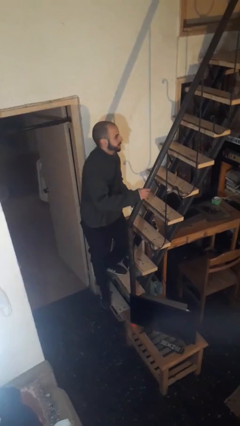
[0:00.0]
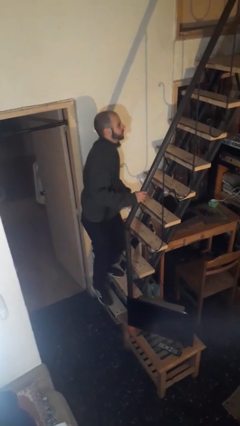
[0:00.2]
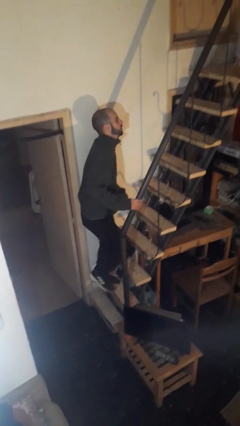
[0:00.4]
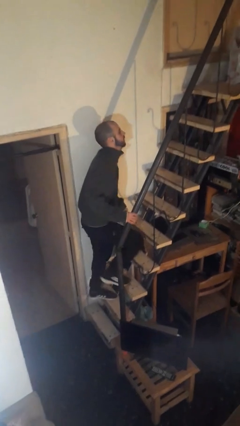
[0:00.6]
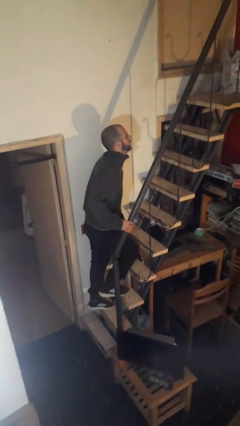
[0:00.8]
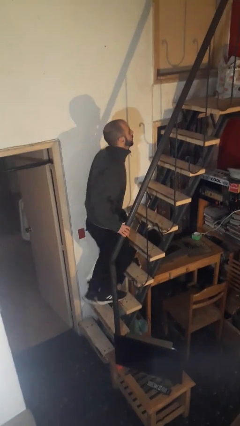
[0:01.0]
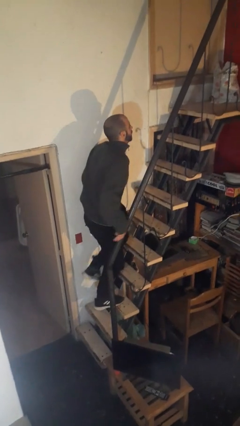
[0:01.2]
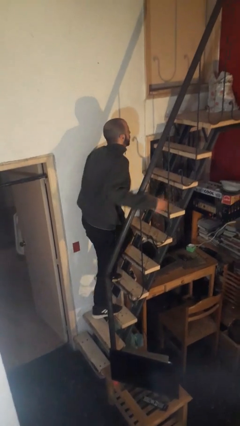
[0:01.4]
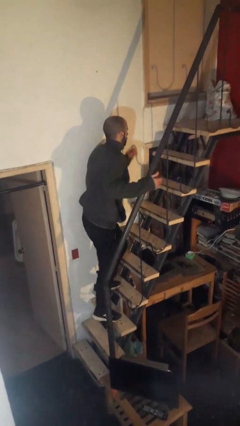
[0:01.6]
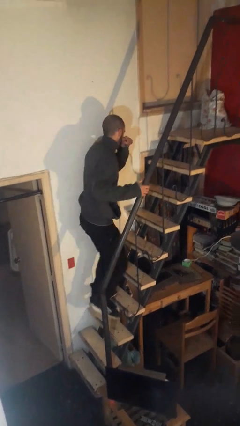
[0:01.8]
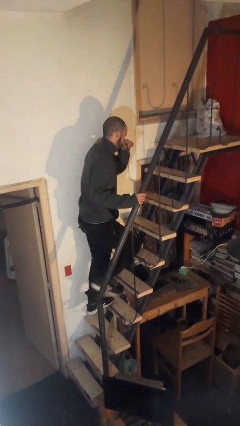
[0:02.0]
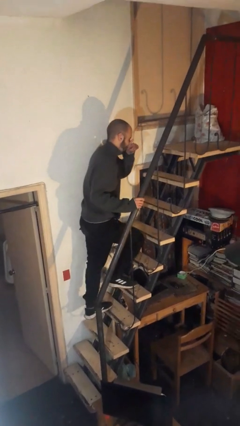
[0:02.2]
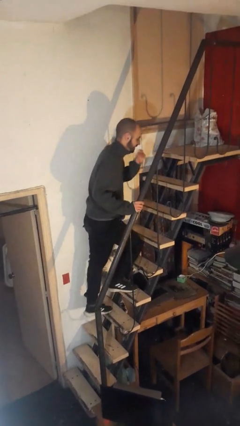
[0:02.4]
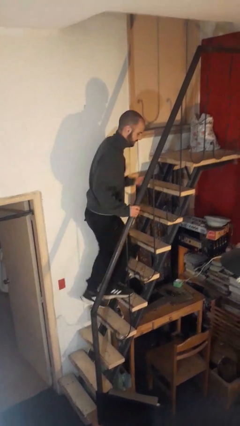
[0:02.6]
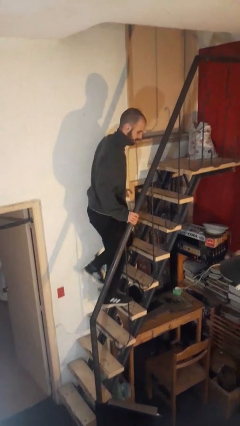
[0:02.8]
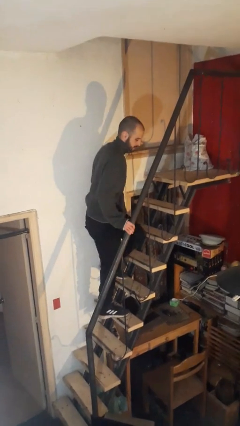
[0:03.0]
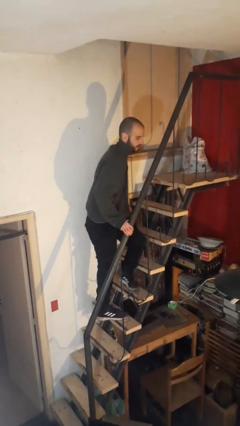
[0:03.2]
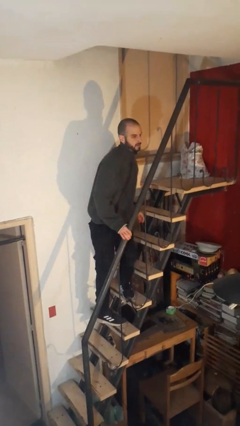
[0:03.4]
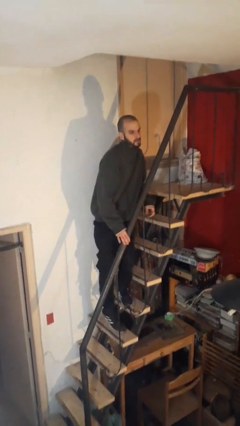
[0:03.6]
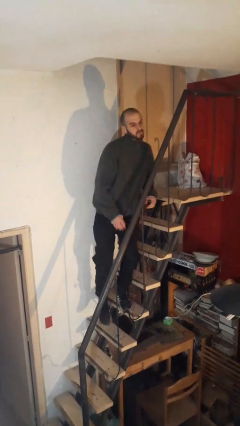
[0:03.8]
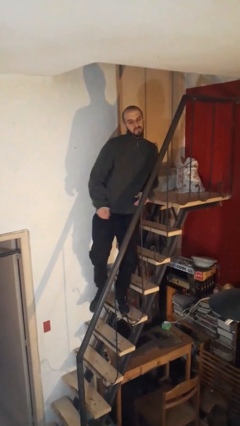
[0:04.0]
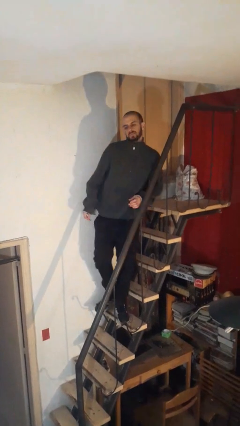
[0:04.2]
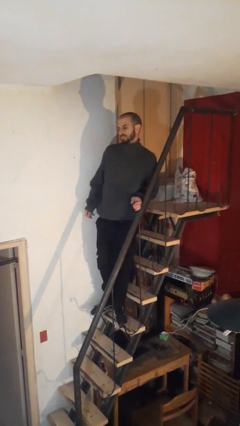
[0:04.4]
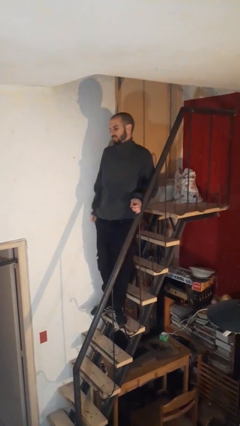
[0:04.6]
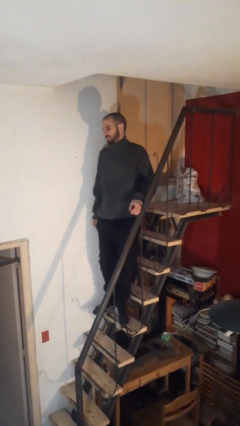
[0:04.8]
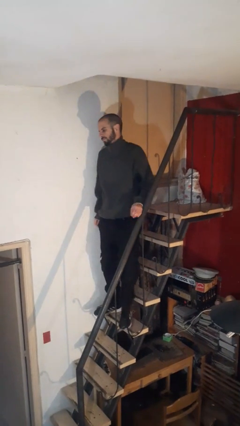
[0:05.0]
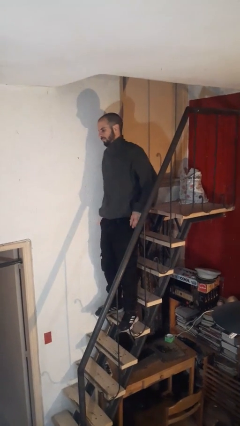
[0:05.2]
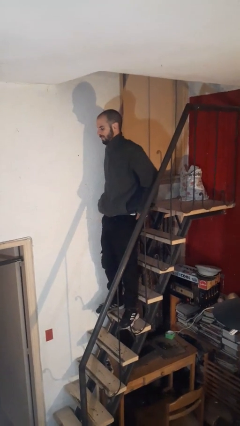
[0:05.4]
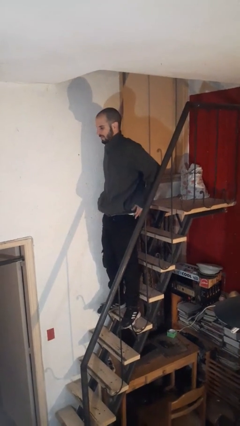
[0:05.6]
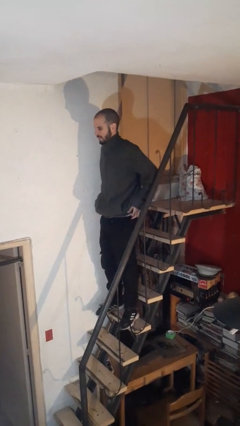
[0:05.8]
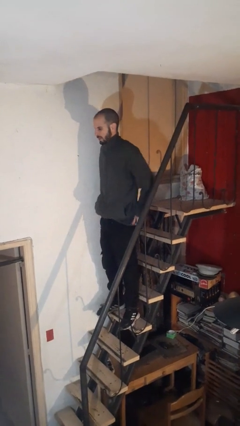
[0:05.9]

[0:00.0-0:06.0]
person climbs up stairs

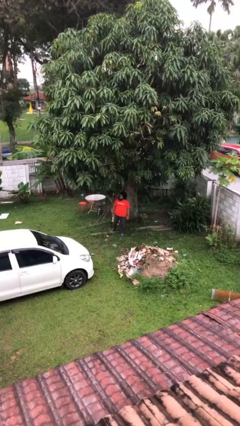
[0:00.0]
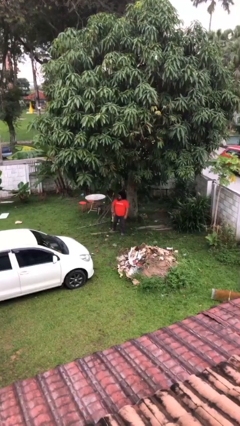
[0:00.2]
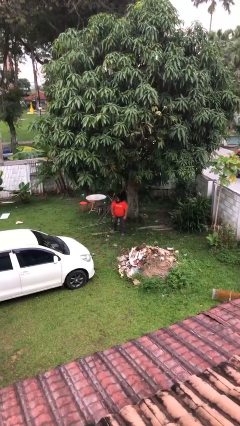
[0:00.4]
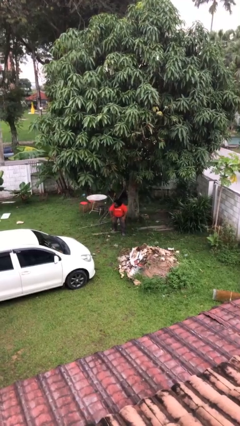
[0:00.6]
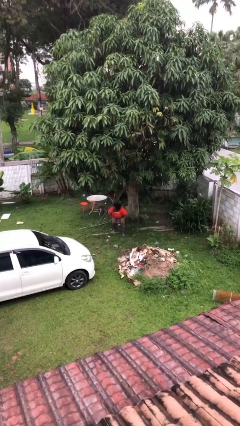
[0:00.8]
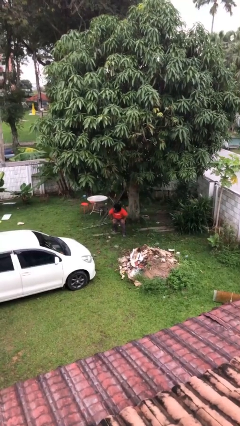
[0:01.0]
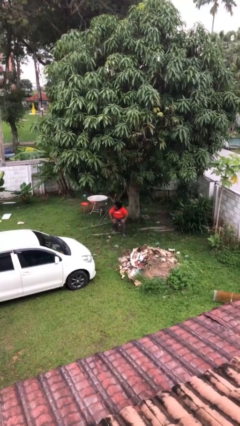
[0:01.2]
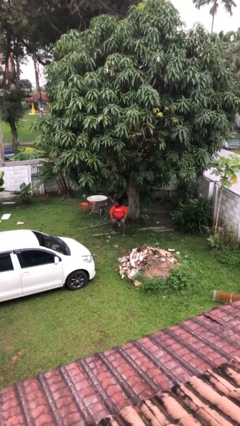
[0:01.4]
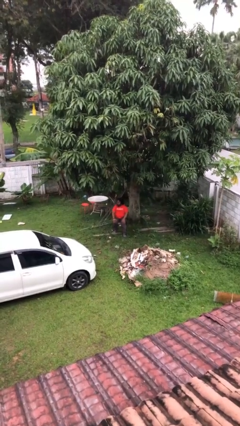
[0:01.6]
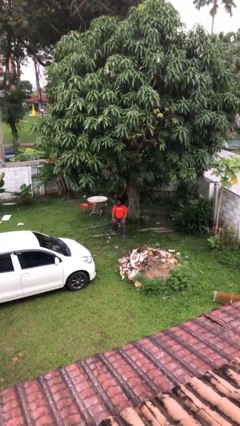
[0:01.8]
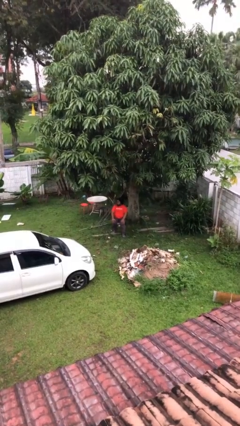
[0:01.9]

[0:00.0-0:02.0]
person sits down

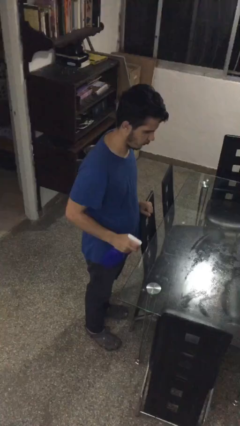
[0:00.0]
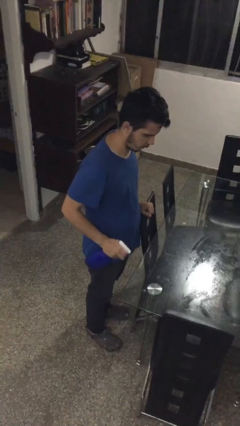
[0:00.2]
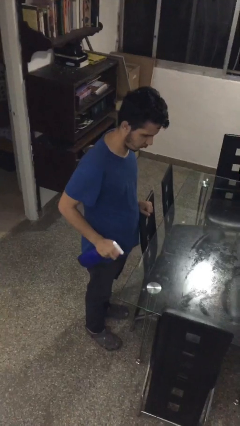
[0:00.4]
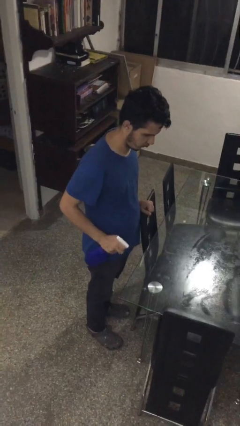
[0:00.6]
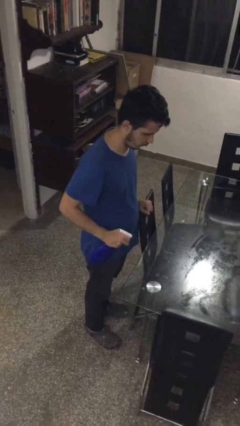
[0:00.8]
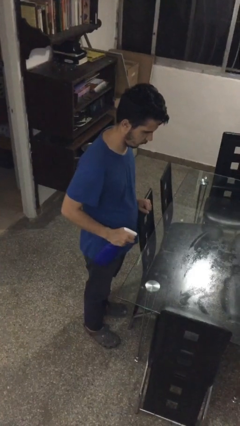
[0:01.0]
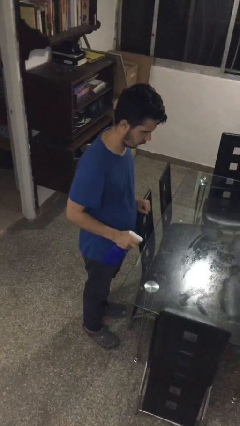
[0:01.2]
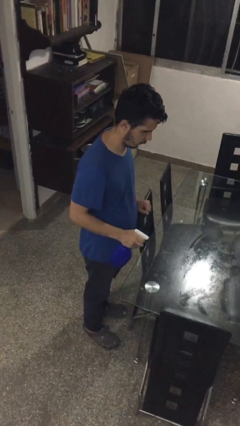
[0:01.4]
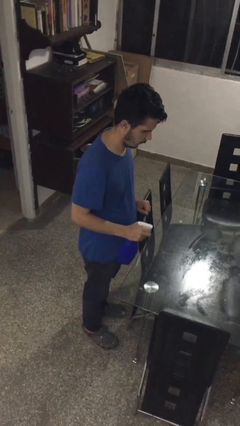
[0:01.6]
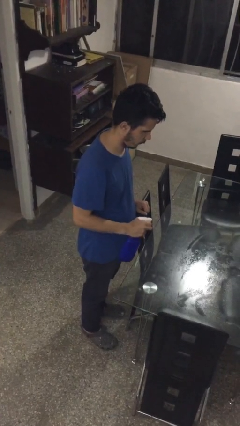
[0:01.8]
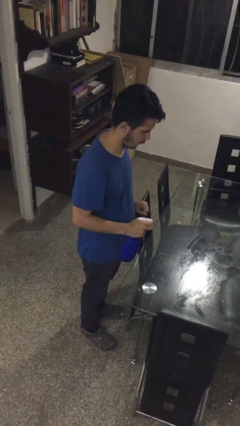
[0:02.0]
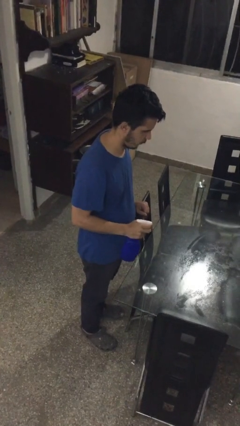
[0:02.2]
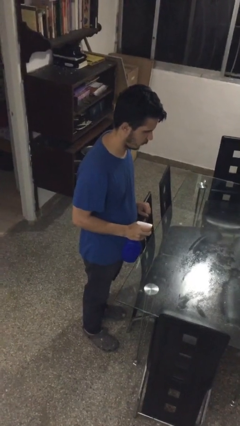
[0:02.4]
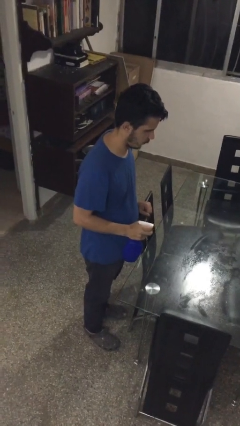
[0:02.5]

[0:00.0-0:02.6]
person sprays from bottle

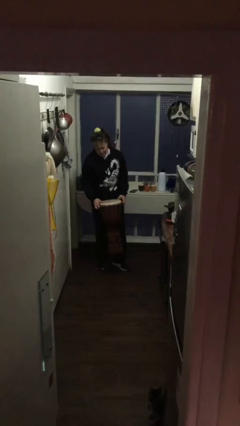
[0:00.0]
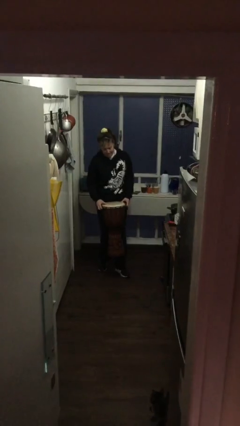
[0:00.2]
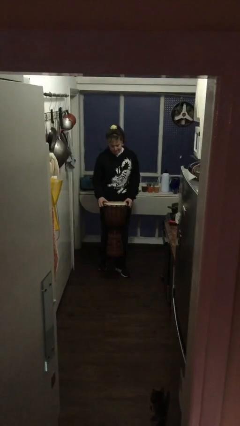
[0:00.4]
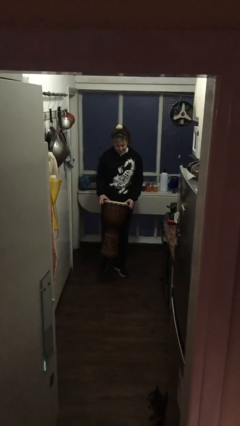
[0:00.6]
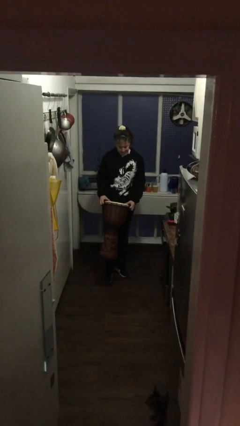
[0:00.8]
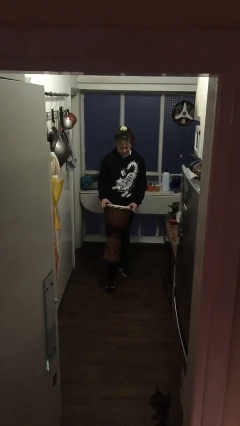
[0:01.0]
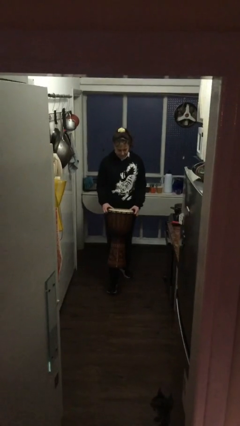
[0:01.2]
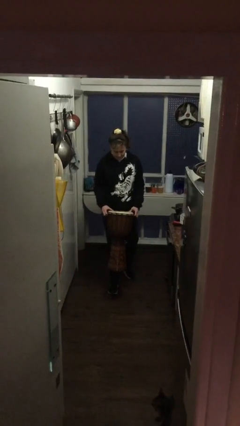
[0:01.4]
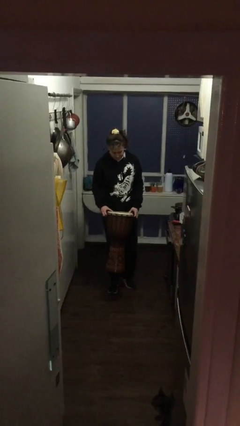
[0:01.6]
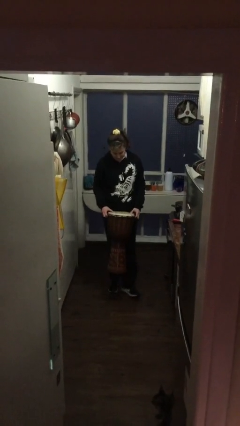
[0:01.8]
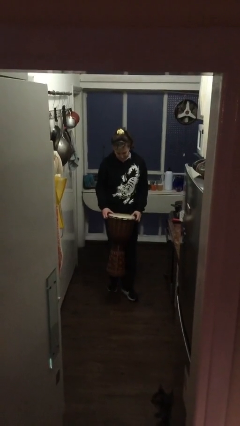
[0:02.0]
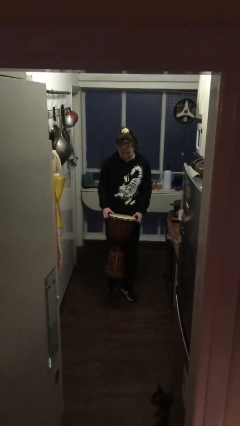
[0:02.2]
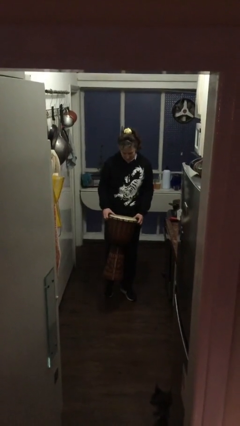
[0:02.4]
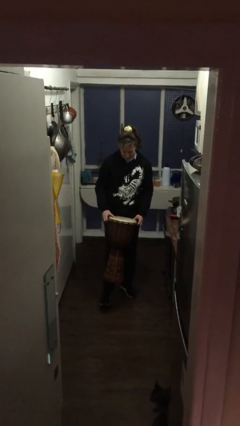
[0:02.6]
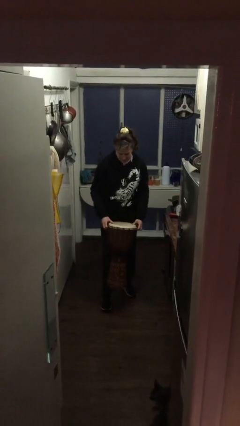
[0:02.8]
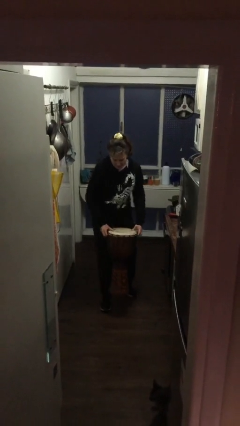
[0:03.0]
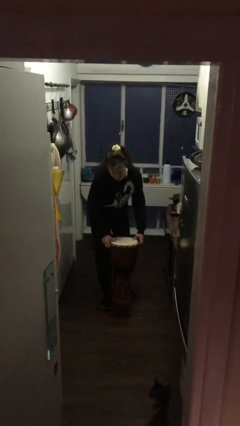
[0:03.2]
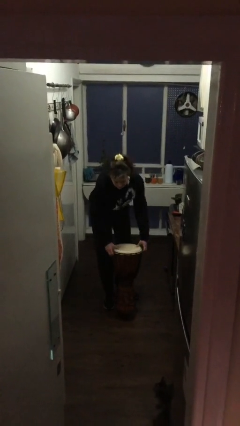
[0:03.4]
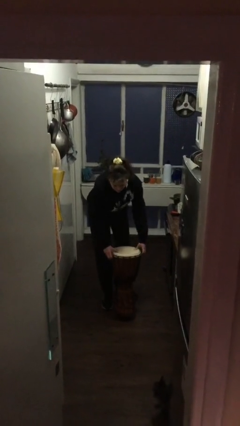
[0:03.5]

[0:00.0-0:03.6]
person carries heavy object

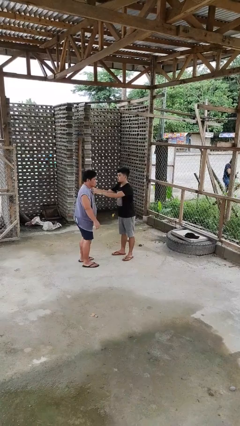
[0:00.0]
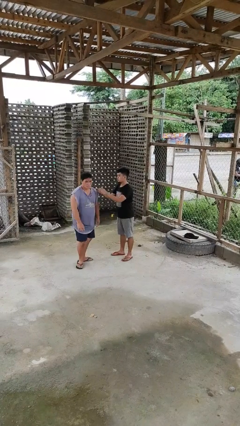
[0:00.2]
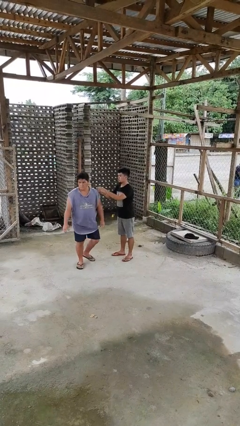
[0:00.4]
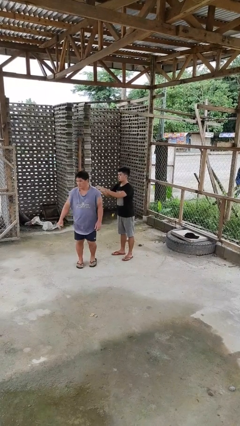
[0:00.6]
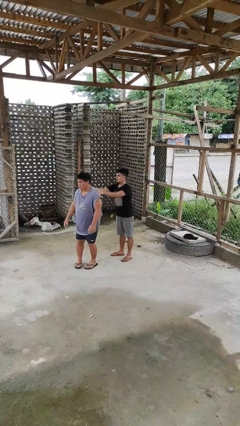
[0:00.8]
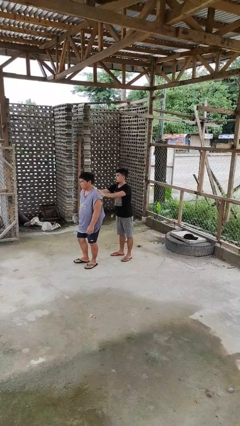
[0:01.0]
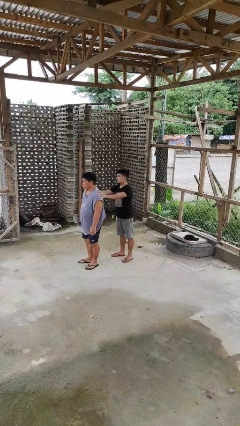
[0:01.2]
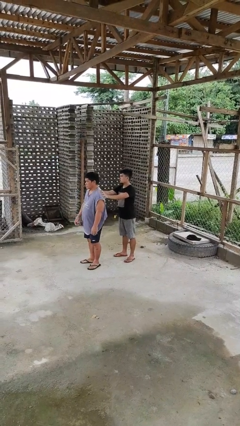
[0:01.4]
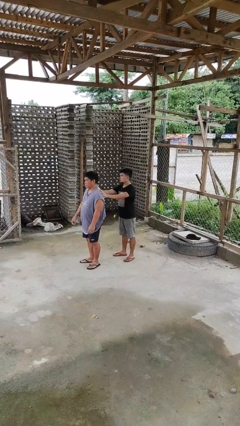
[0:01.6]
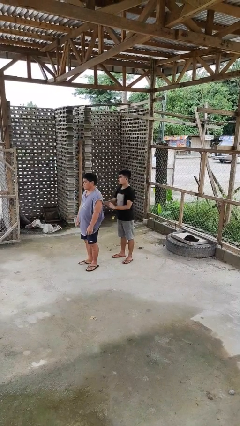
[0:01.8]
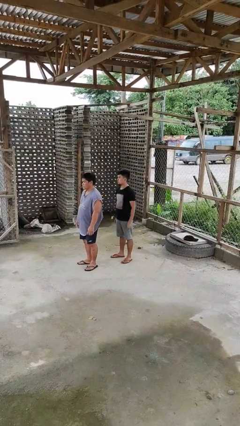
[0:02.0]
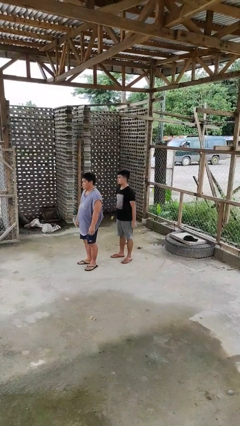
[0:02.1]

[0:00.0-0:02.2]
person spins person around

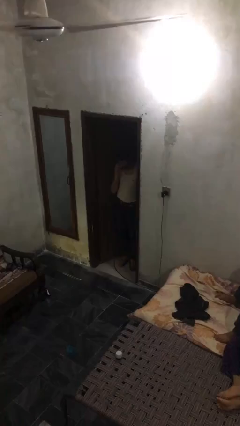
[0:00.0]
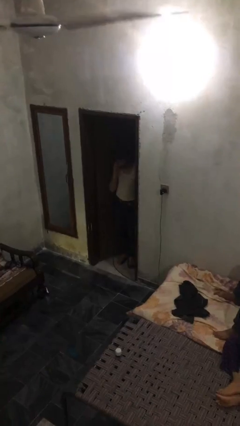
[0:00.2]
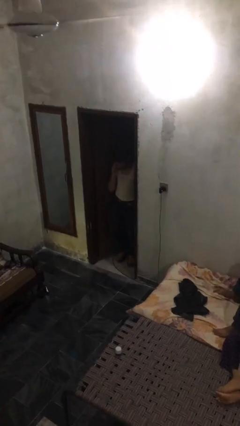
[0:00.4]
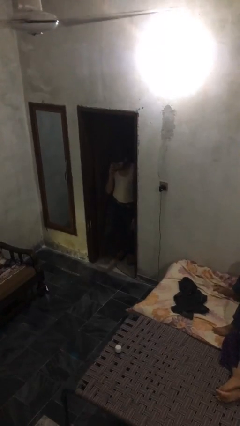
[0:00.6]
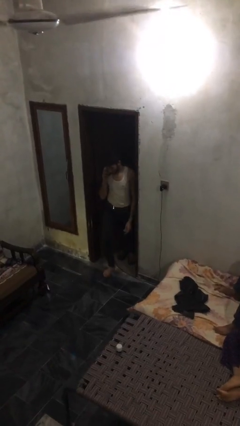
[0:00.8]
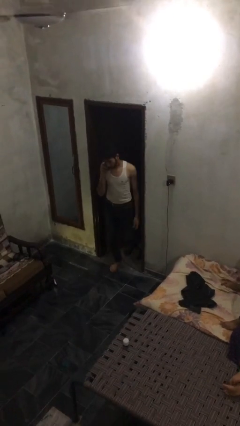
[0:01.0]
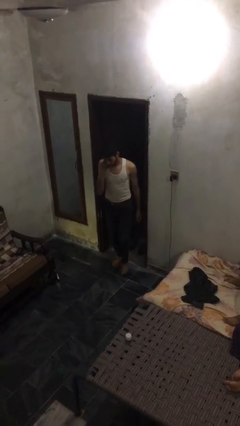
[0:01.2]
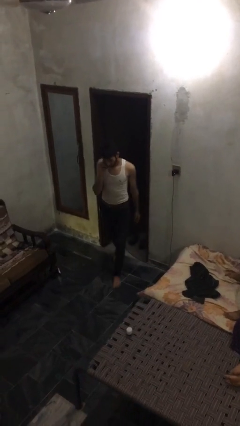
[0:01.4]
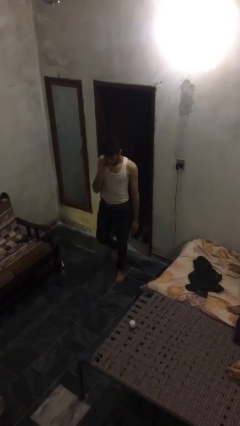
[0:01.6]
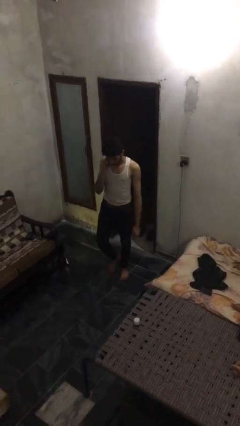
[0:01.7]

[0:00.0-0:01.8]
person enters scene through structure
